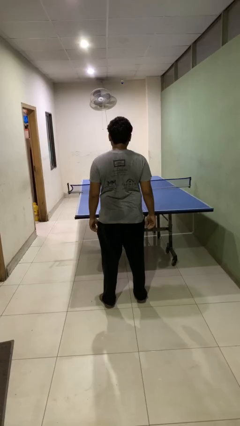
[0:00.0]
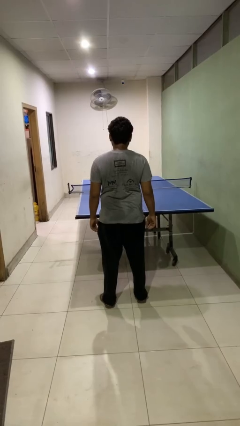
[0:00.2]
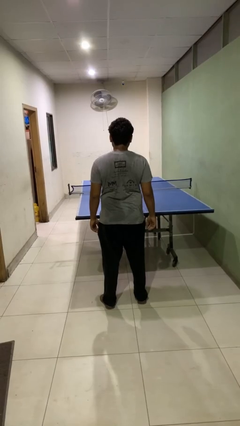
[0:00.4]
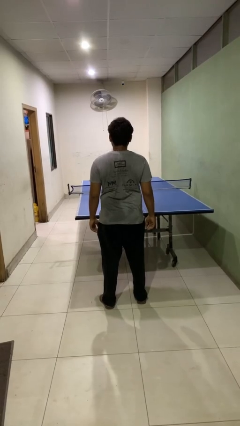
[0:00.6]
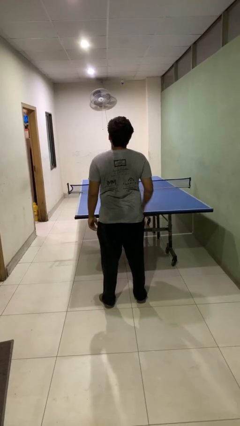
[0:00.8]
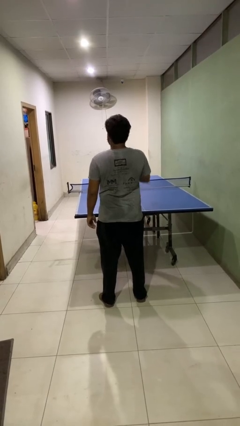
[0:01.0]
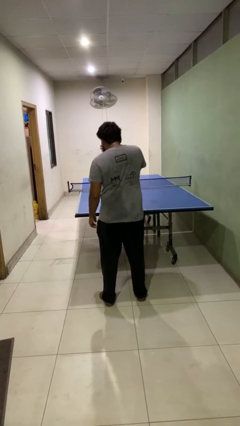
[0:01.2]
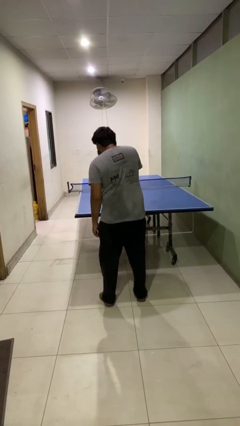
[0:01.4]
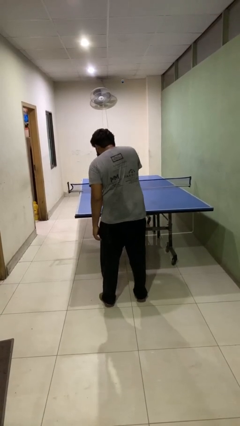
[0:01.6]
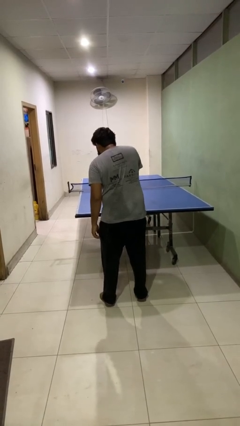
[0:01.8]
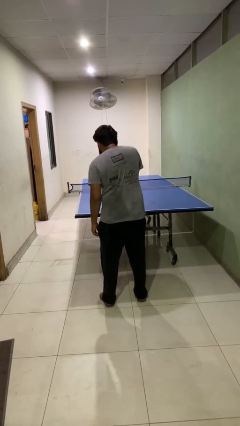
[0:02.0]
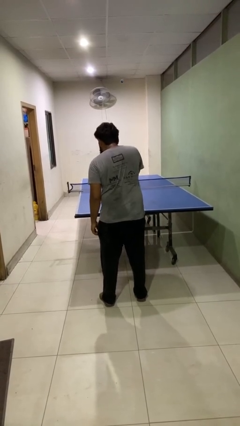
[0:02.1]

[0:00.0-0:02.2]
person sneezes into hand

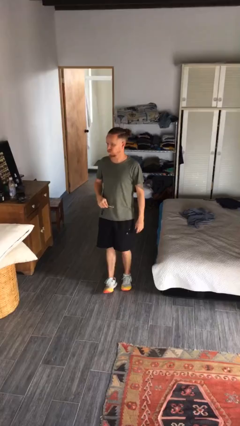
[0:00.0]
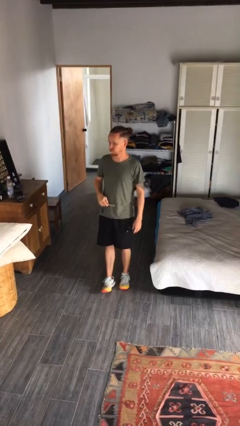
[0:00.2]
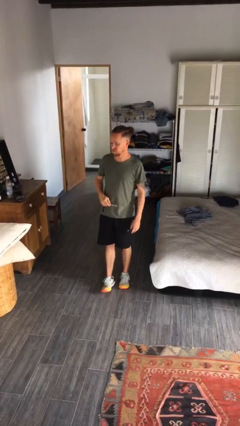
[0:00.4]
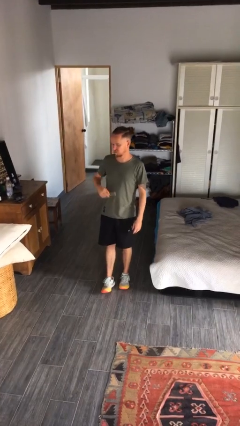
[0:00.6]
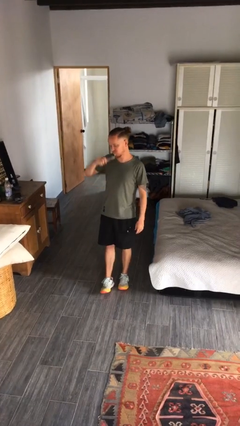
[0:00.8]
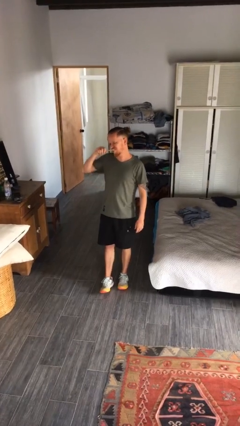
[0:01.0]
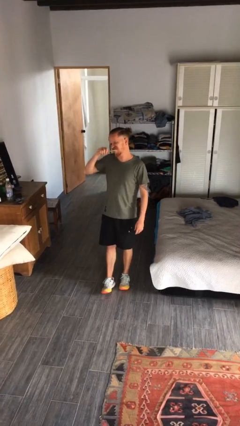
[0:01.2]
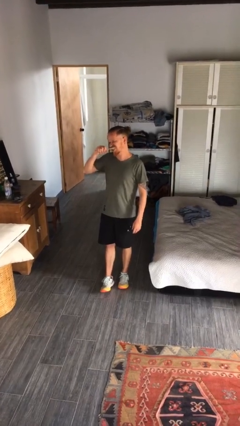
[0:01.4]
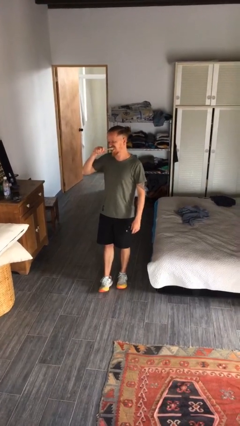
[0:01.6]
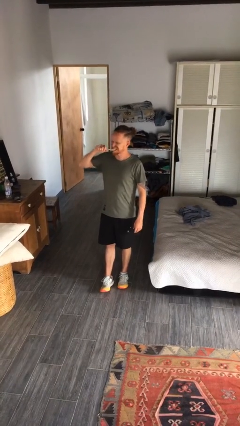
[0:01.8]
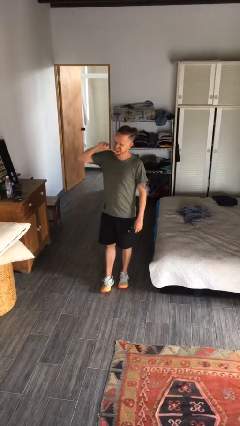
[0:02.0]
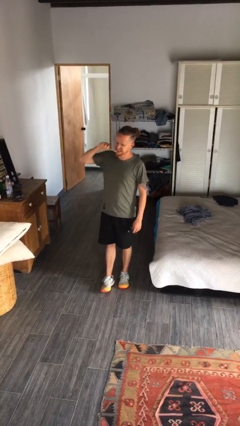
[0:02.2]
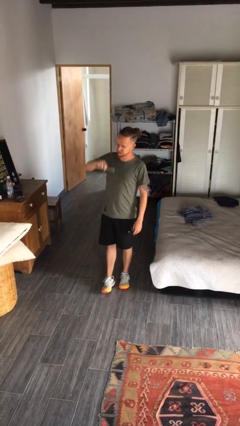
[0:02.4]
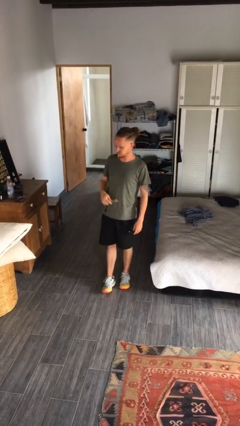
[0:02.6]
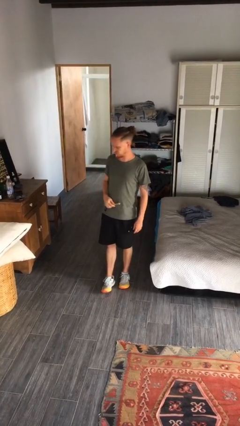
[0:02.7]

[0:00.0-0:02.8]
person brushes teeth

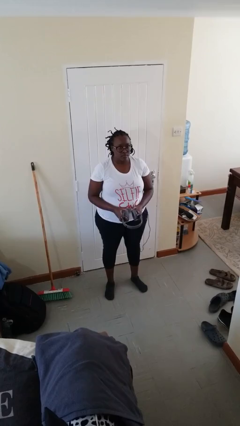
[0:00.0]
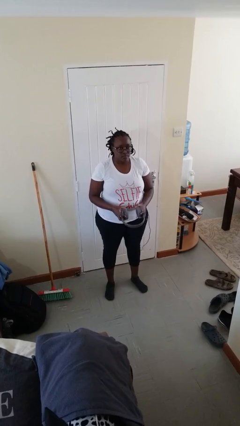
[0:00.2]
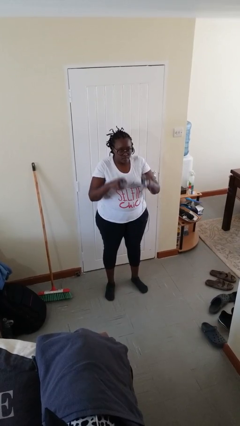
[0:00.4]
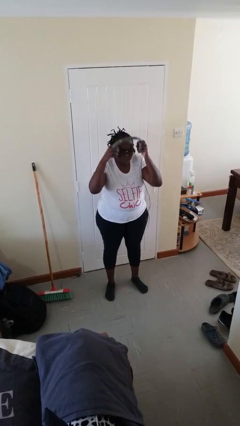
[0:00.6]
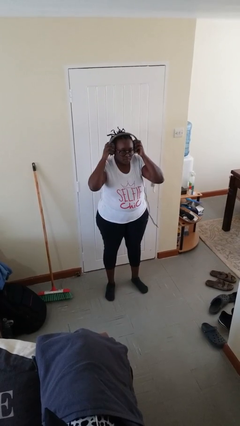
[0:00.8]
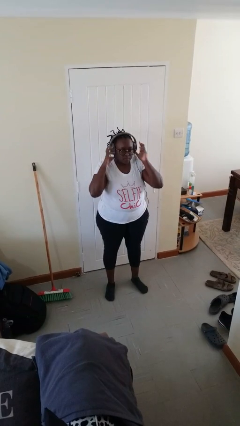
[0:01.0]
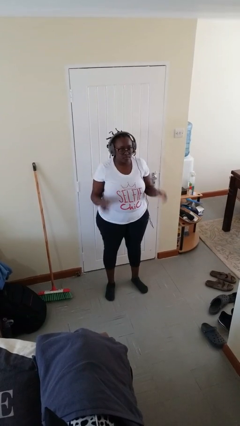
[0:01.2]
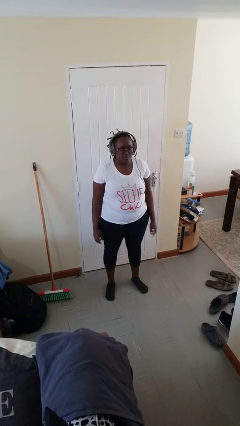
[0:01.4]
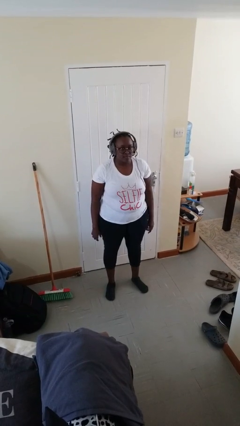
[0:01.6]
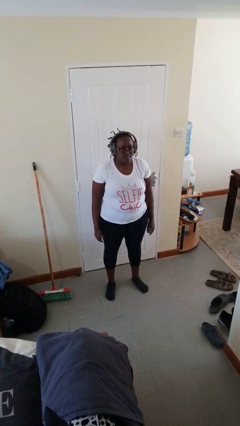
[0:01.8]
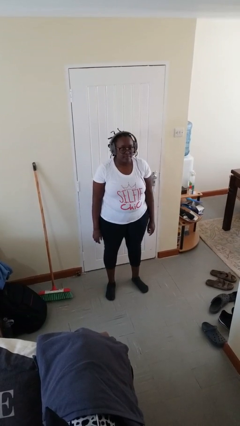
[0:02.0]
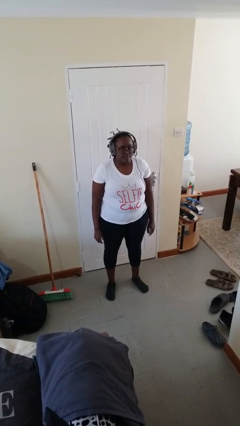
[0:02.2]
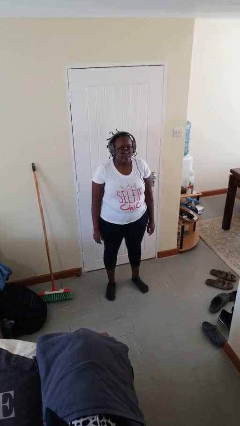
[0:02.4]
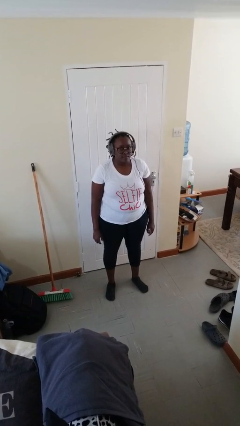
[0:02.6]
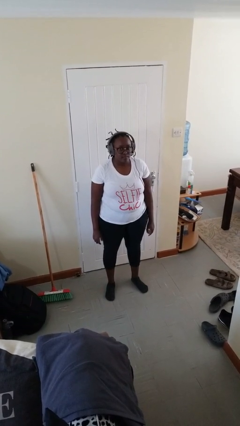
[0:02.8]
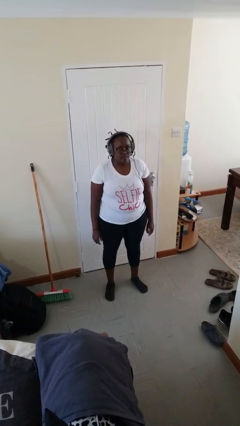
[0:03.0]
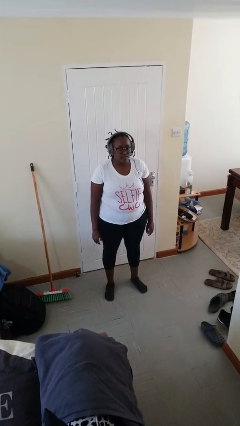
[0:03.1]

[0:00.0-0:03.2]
person puts on headphones

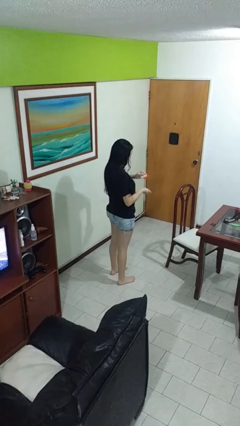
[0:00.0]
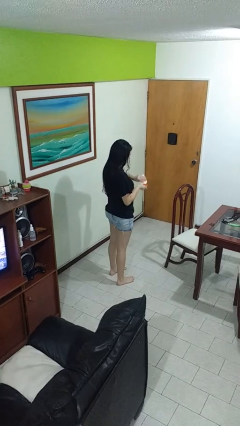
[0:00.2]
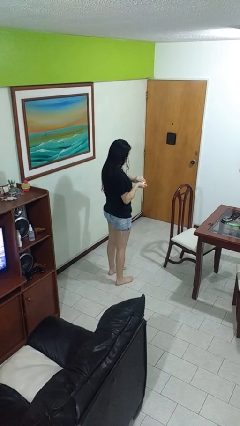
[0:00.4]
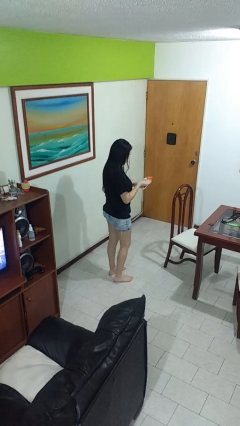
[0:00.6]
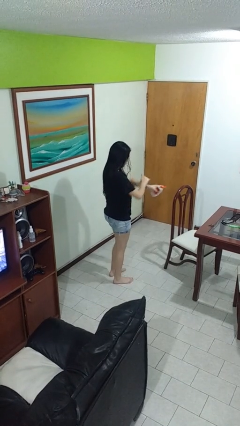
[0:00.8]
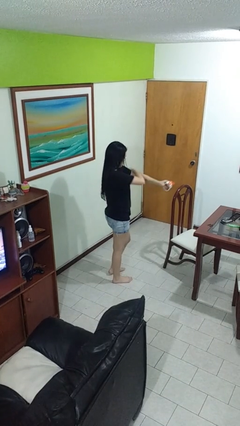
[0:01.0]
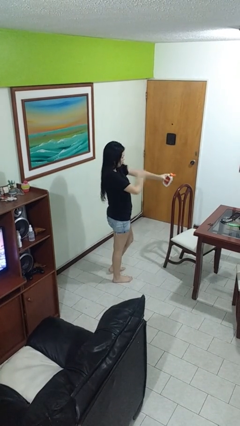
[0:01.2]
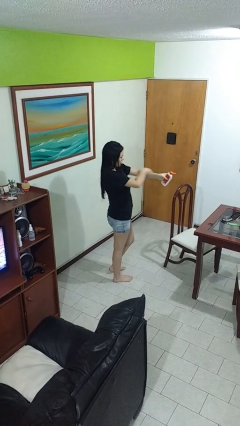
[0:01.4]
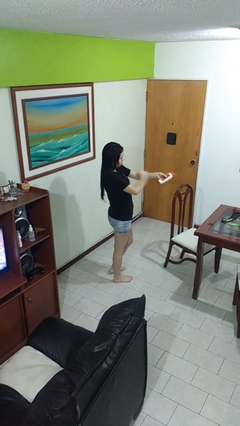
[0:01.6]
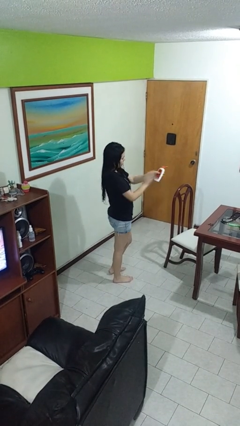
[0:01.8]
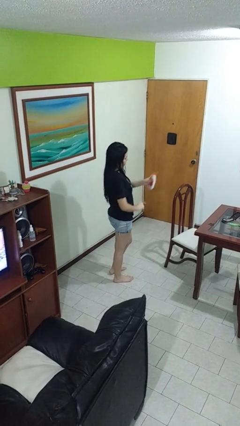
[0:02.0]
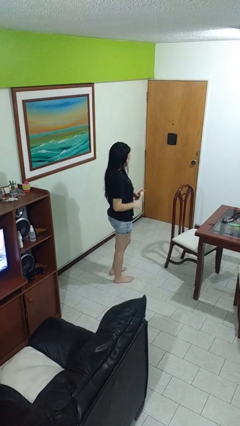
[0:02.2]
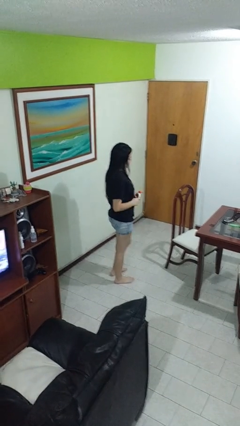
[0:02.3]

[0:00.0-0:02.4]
person applies sunscreen

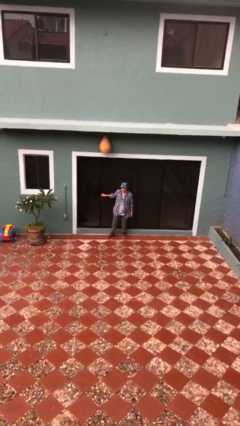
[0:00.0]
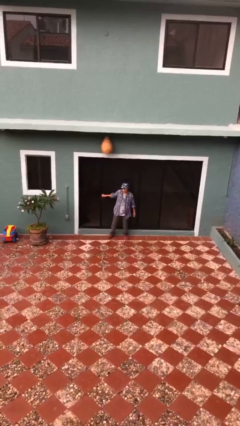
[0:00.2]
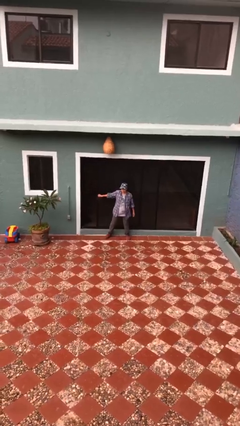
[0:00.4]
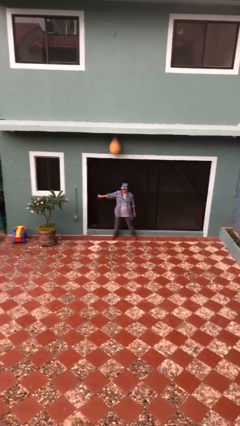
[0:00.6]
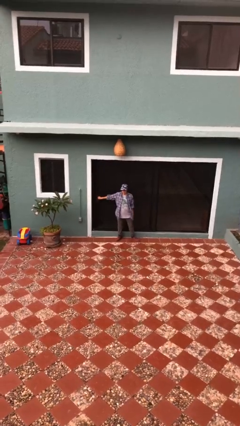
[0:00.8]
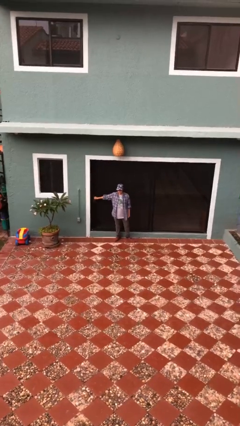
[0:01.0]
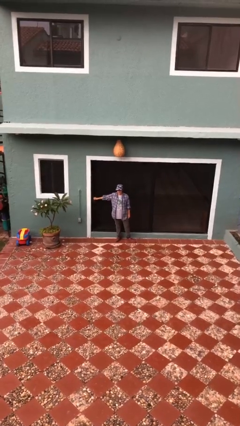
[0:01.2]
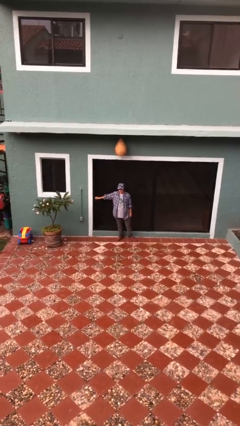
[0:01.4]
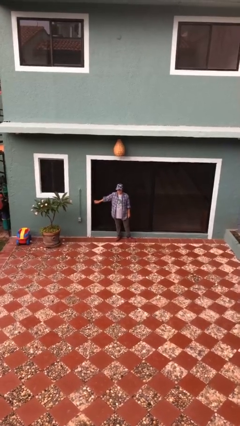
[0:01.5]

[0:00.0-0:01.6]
person closes sliding door

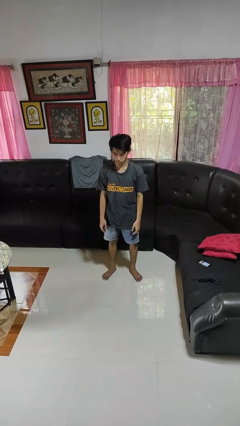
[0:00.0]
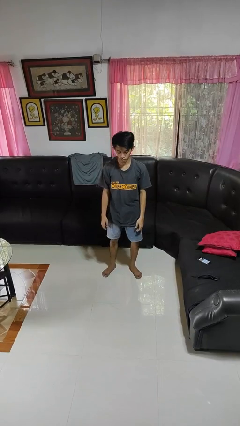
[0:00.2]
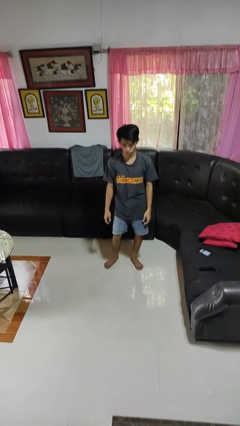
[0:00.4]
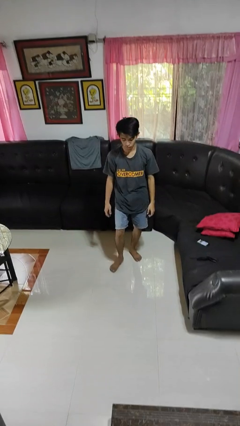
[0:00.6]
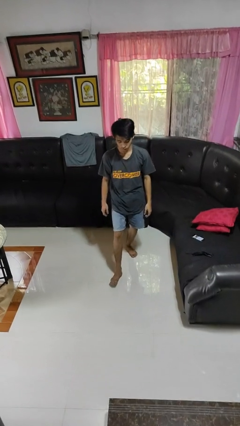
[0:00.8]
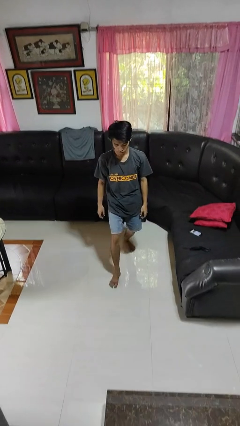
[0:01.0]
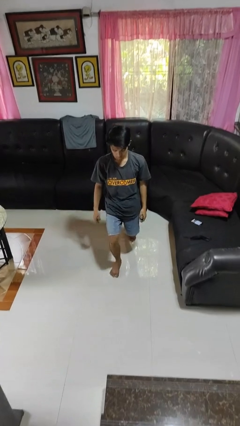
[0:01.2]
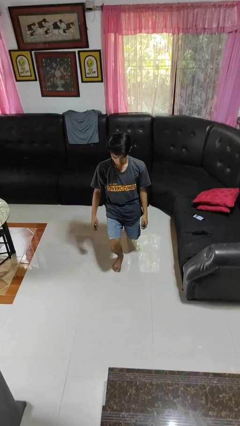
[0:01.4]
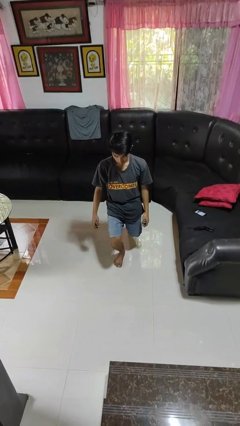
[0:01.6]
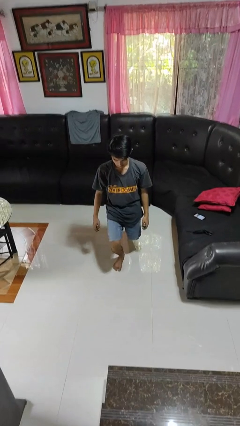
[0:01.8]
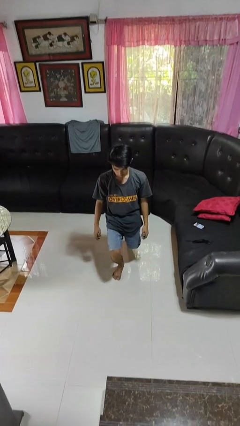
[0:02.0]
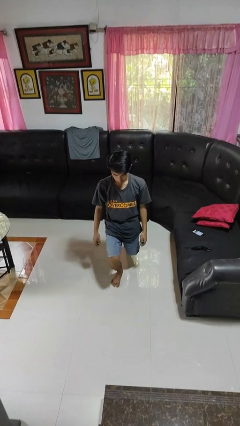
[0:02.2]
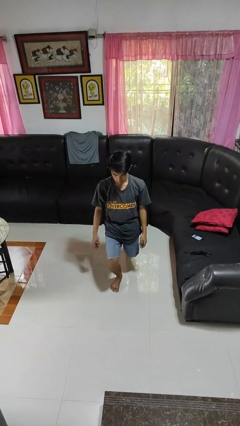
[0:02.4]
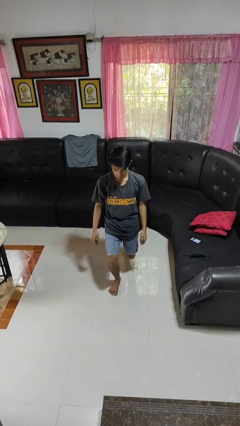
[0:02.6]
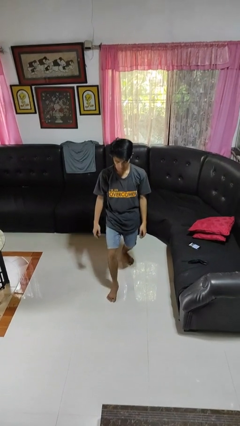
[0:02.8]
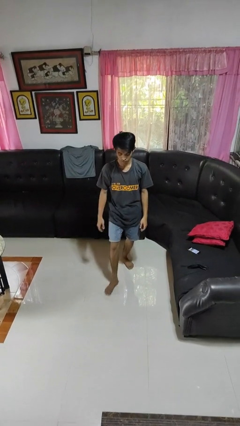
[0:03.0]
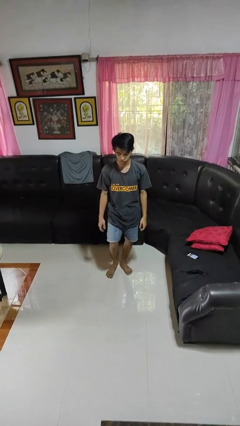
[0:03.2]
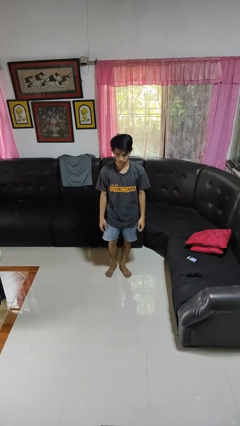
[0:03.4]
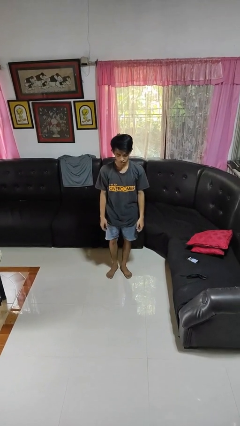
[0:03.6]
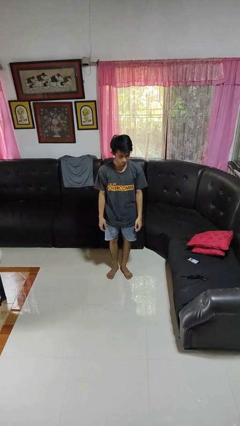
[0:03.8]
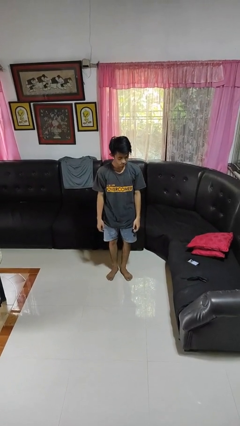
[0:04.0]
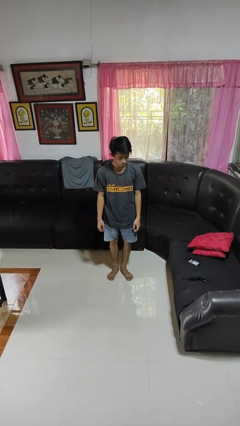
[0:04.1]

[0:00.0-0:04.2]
person exercises with lunges

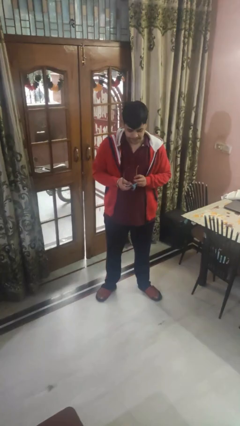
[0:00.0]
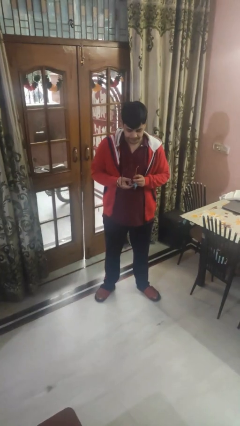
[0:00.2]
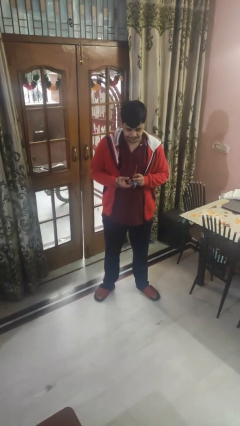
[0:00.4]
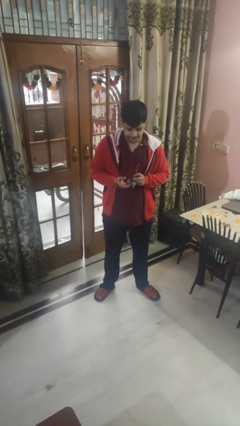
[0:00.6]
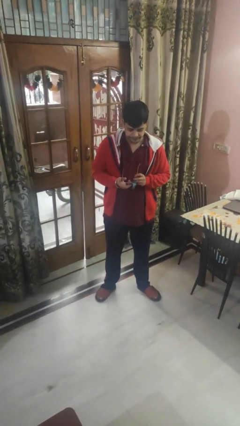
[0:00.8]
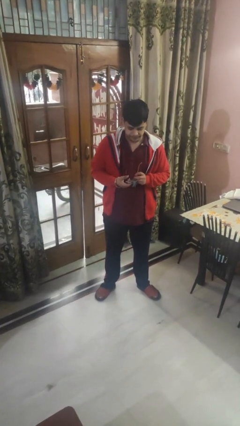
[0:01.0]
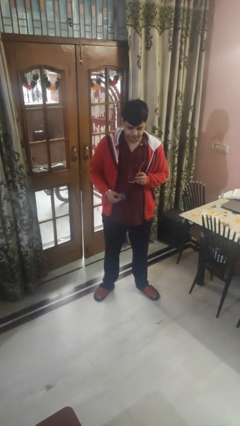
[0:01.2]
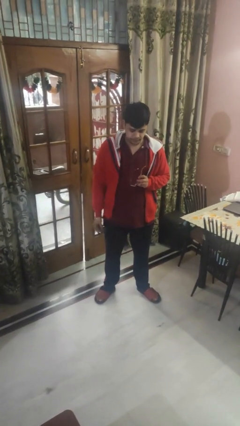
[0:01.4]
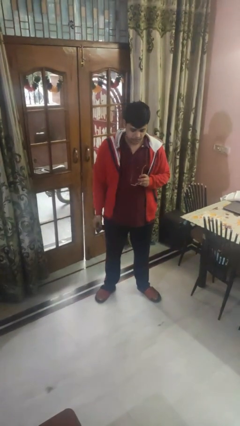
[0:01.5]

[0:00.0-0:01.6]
person cleans eyeglasses
